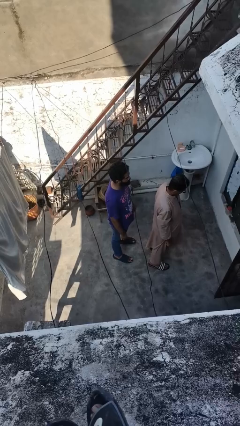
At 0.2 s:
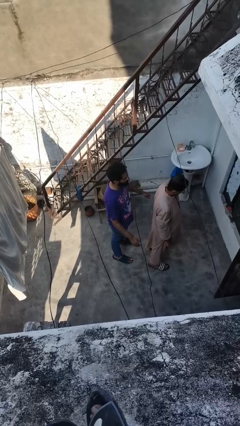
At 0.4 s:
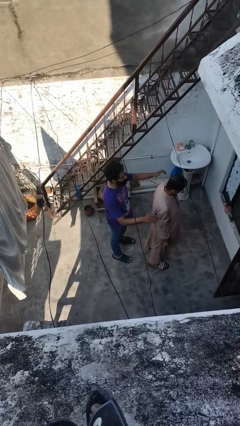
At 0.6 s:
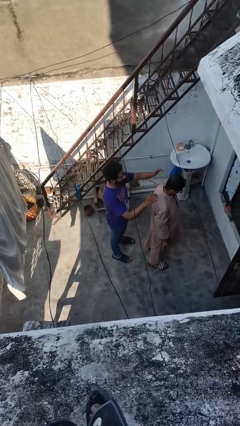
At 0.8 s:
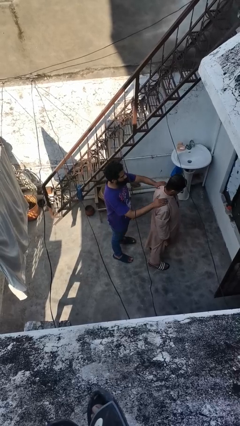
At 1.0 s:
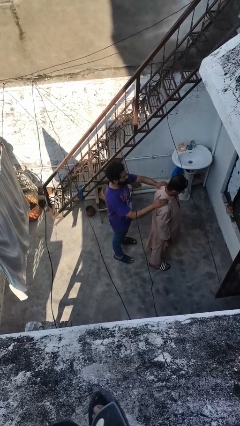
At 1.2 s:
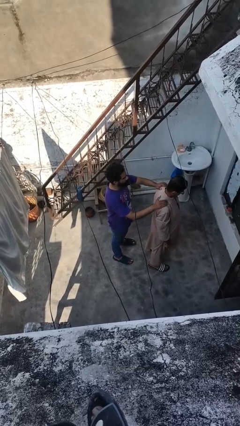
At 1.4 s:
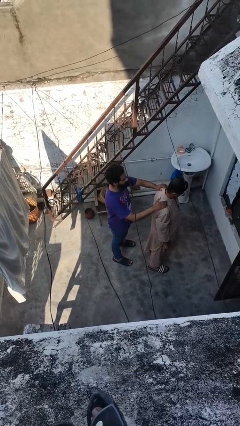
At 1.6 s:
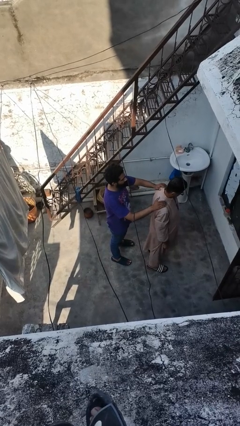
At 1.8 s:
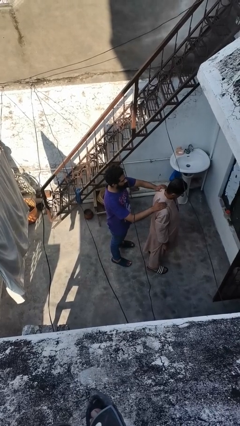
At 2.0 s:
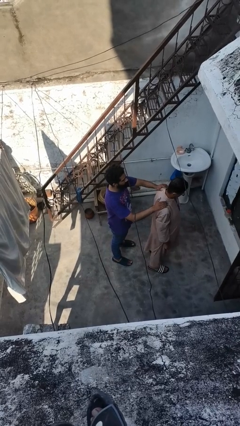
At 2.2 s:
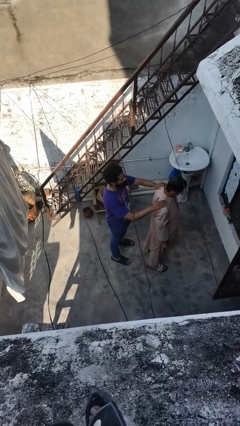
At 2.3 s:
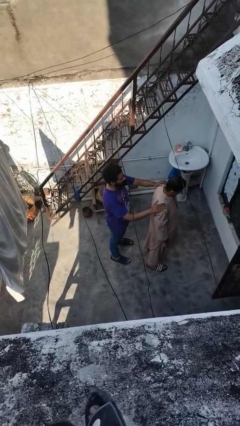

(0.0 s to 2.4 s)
person touches back of person

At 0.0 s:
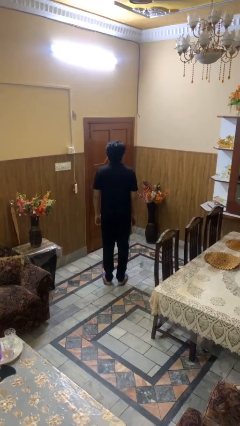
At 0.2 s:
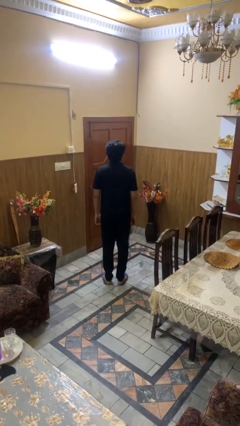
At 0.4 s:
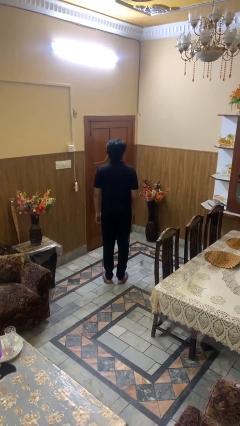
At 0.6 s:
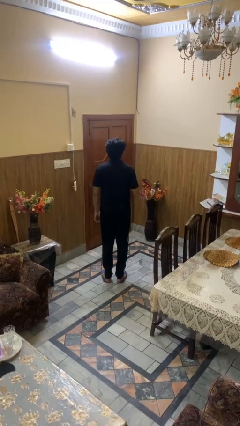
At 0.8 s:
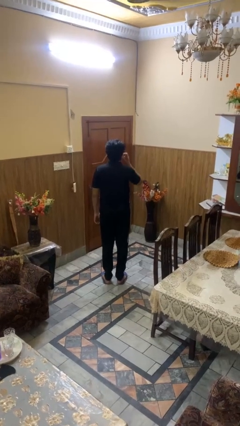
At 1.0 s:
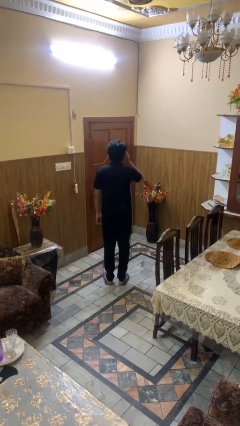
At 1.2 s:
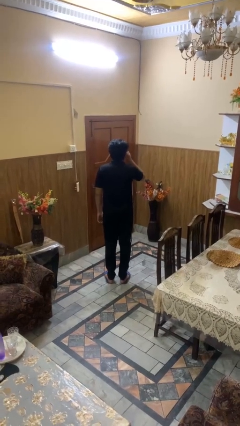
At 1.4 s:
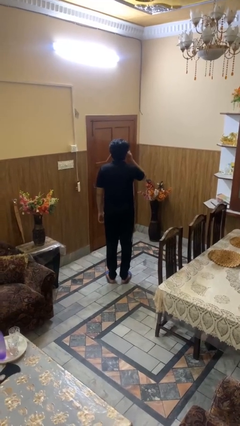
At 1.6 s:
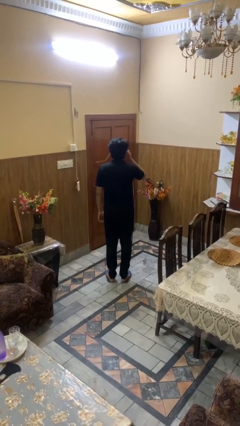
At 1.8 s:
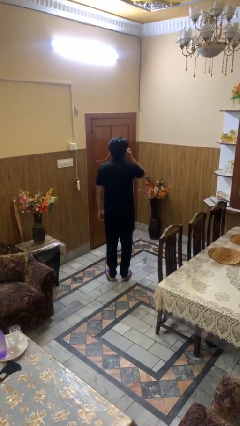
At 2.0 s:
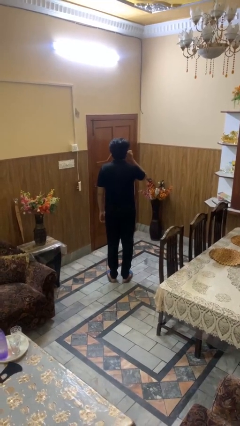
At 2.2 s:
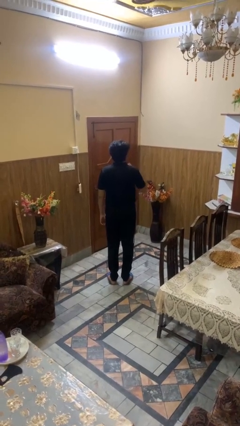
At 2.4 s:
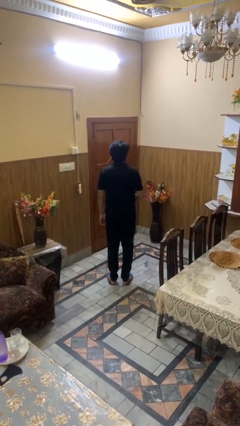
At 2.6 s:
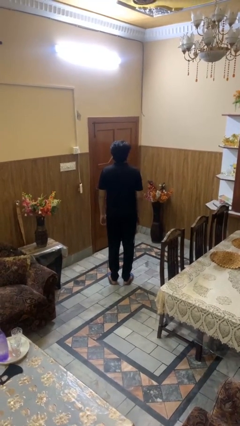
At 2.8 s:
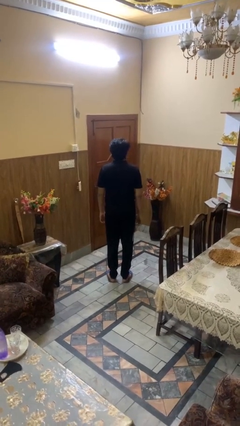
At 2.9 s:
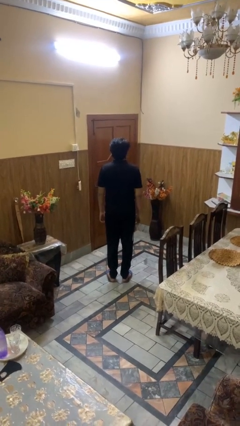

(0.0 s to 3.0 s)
person touches earlobe

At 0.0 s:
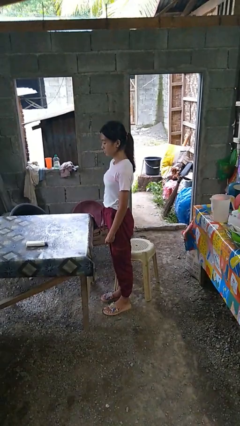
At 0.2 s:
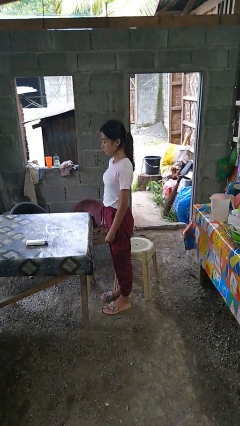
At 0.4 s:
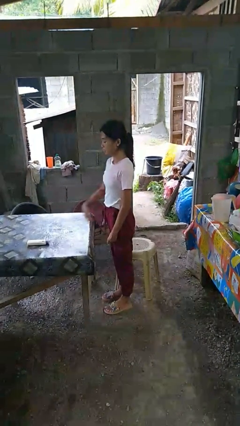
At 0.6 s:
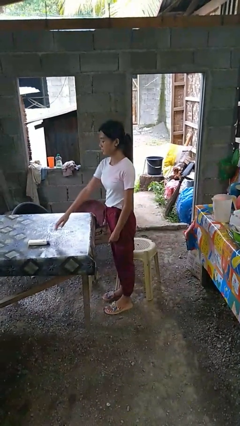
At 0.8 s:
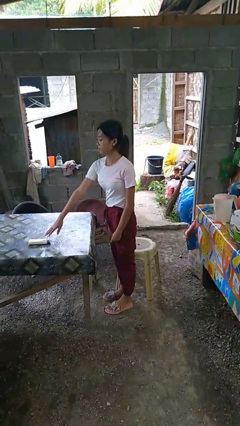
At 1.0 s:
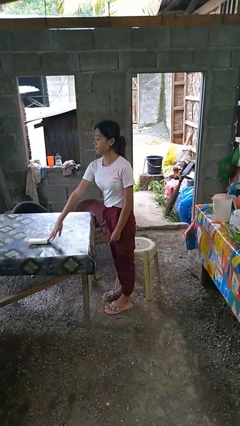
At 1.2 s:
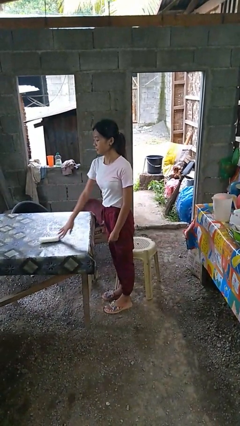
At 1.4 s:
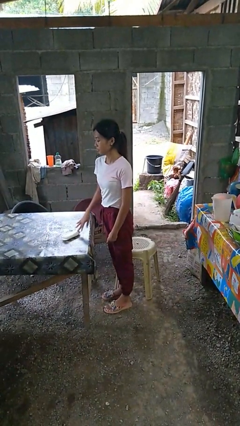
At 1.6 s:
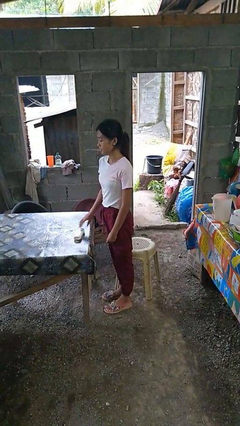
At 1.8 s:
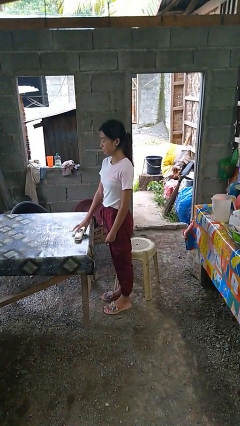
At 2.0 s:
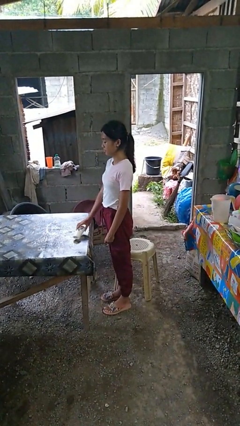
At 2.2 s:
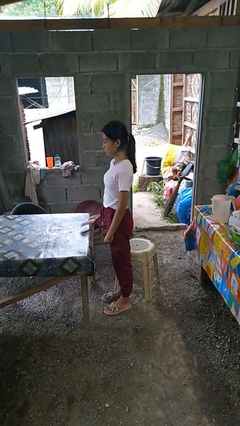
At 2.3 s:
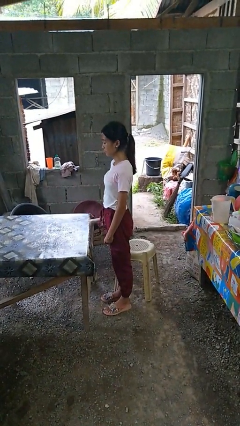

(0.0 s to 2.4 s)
person picks up object from table

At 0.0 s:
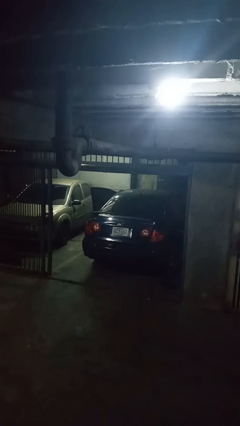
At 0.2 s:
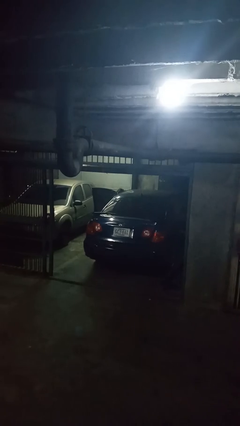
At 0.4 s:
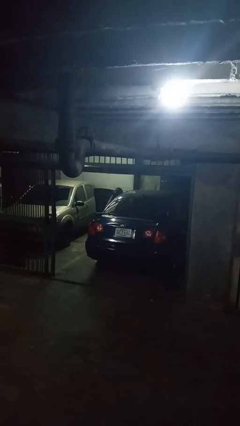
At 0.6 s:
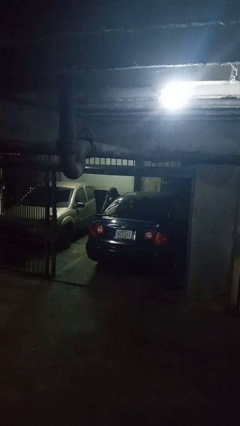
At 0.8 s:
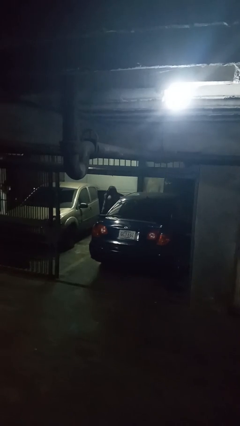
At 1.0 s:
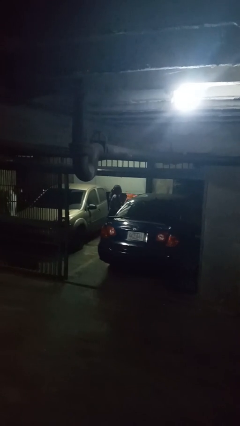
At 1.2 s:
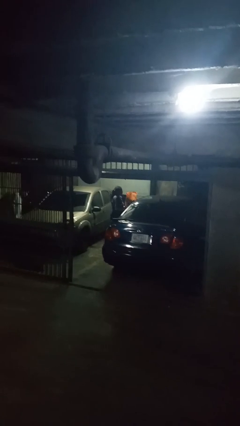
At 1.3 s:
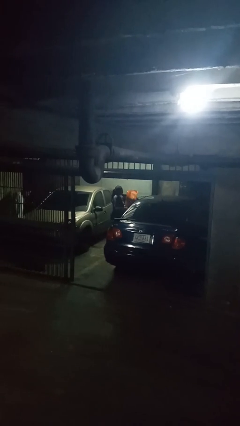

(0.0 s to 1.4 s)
person unloads car

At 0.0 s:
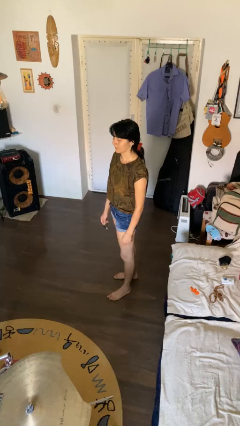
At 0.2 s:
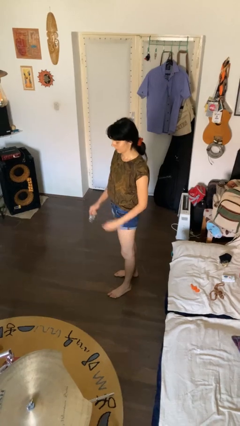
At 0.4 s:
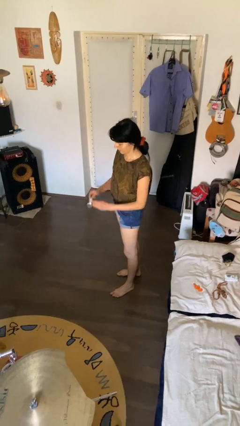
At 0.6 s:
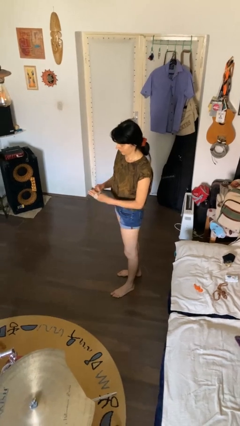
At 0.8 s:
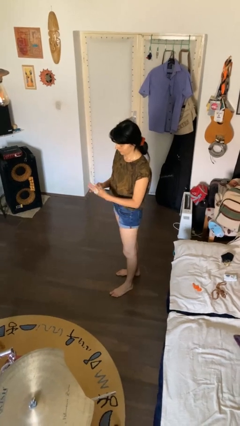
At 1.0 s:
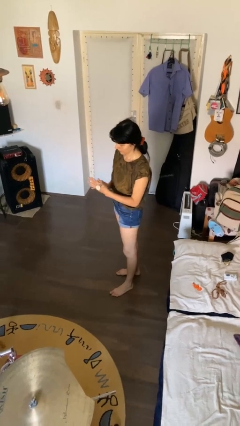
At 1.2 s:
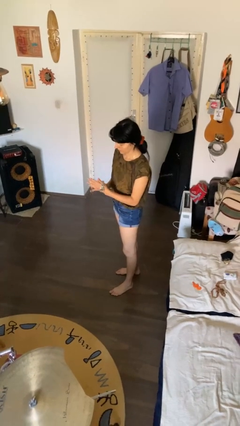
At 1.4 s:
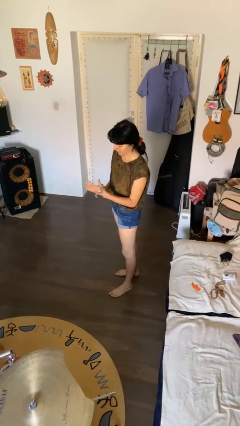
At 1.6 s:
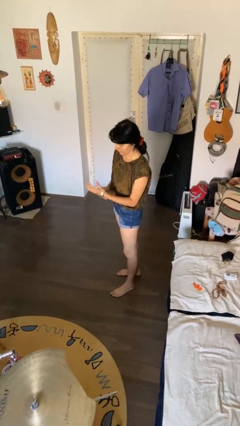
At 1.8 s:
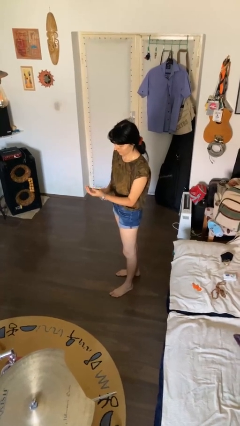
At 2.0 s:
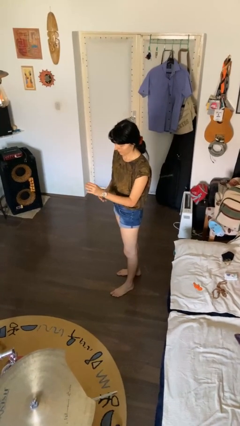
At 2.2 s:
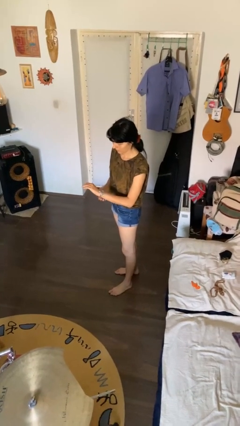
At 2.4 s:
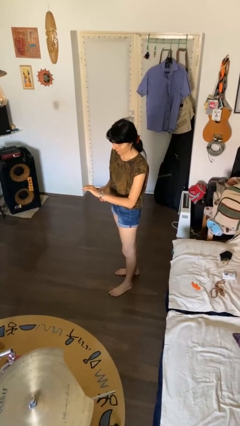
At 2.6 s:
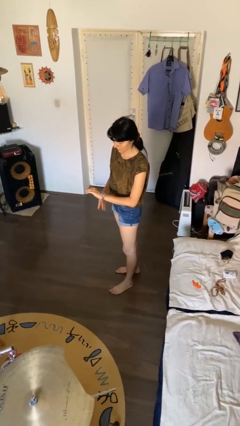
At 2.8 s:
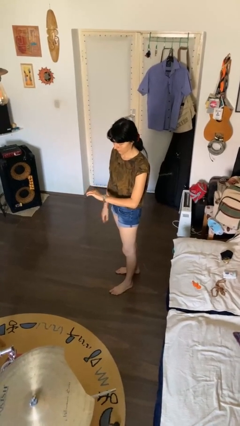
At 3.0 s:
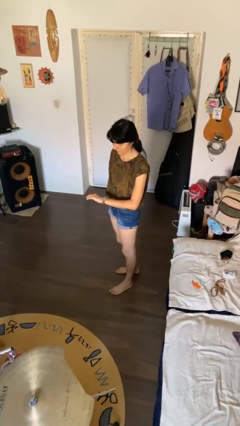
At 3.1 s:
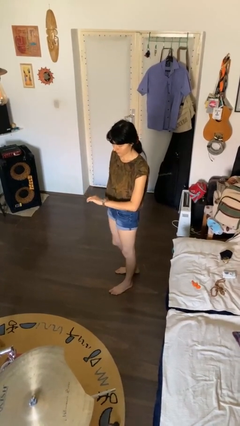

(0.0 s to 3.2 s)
person puts on wristwatch

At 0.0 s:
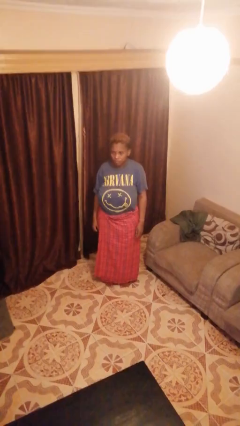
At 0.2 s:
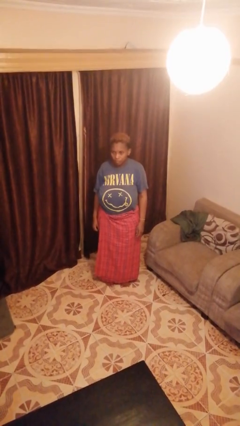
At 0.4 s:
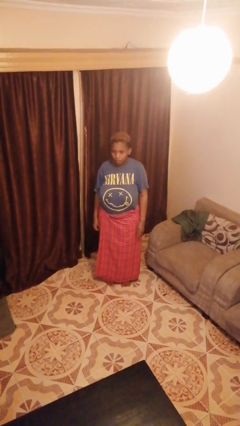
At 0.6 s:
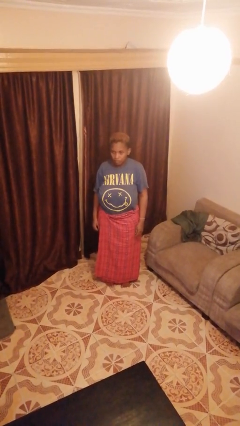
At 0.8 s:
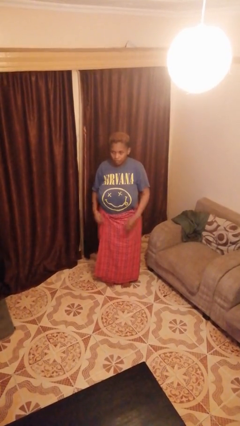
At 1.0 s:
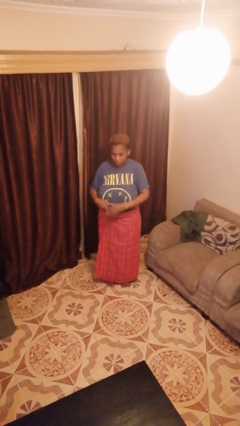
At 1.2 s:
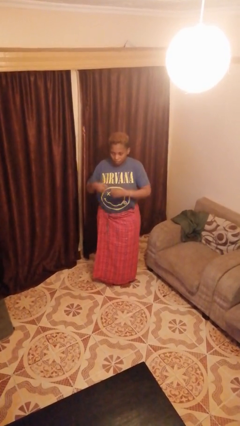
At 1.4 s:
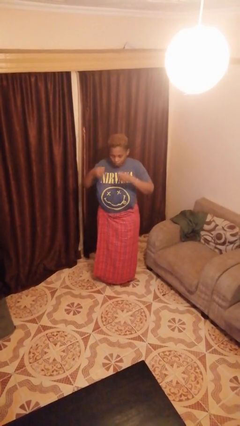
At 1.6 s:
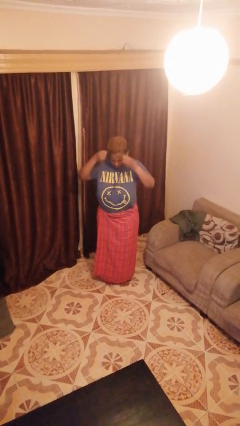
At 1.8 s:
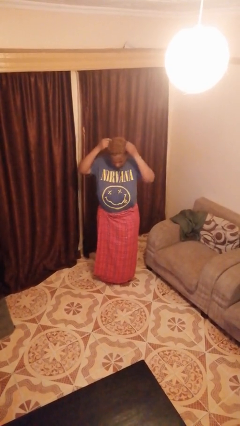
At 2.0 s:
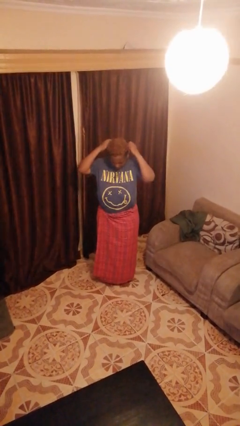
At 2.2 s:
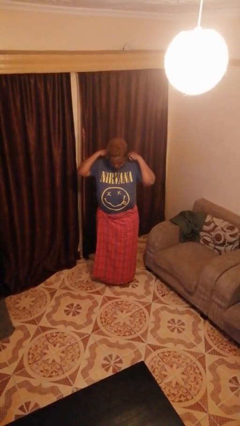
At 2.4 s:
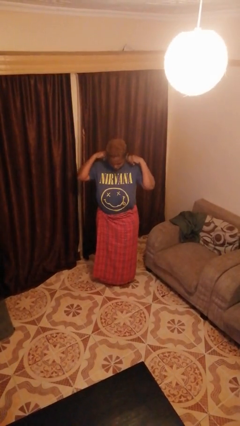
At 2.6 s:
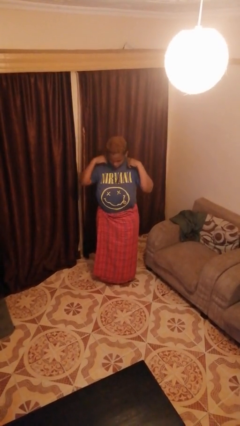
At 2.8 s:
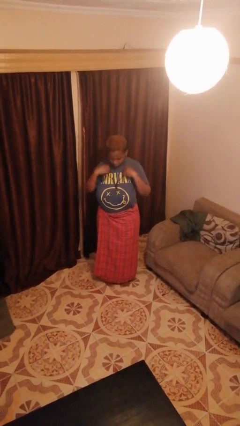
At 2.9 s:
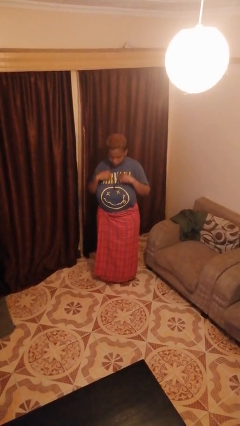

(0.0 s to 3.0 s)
person puts on necklace

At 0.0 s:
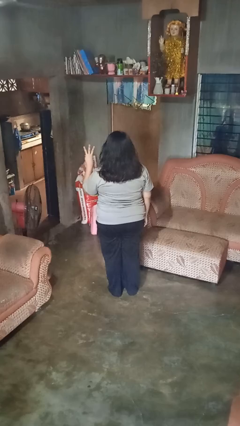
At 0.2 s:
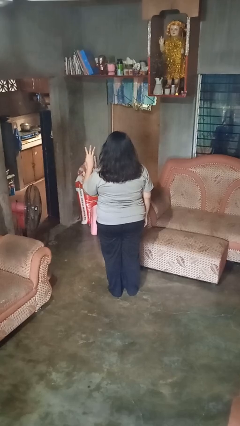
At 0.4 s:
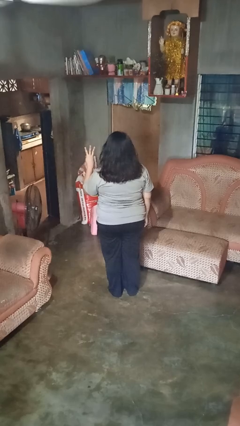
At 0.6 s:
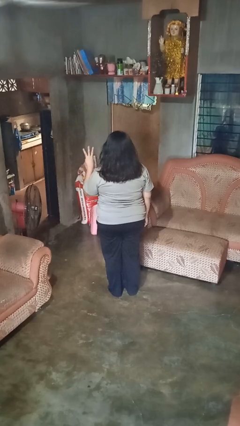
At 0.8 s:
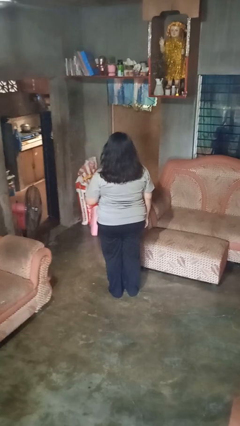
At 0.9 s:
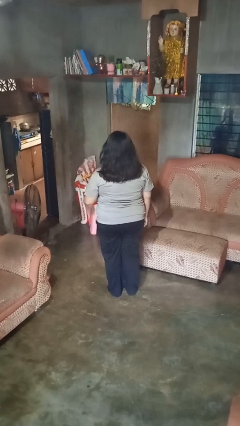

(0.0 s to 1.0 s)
person gestures number three

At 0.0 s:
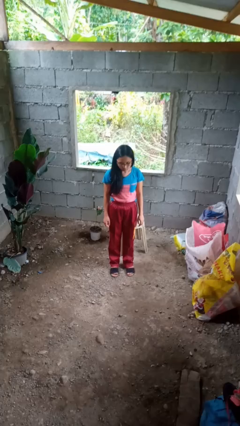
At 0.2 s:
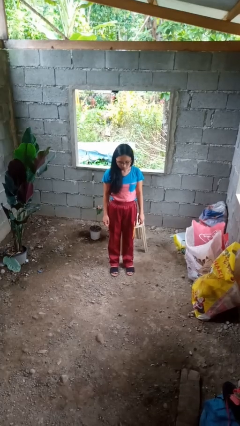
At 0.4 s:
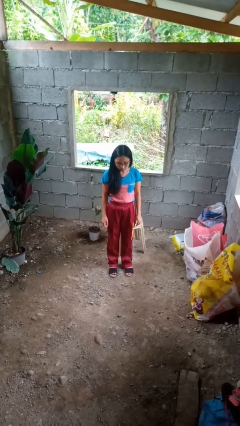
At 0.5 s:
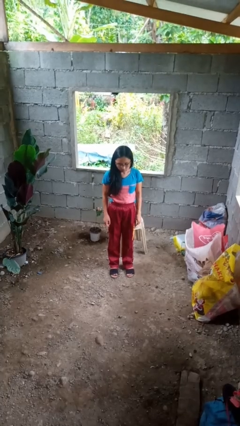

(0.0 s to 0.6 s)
person tucks in shirt
